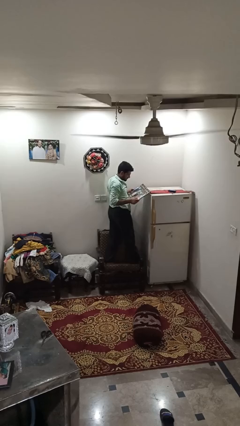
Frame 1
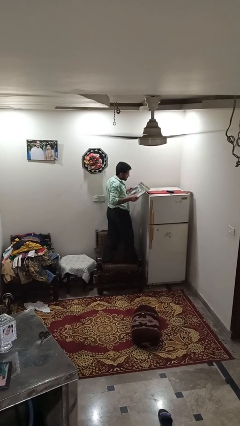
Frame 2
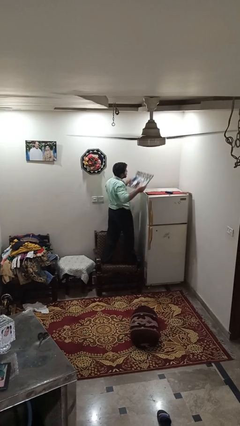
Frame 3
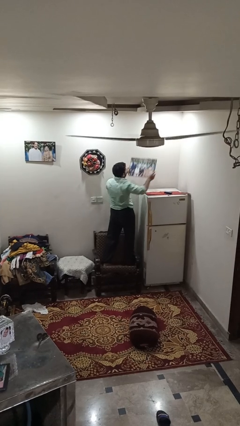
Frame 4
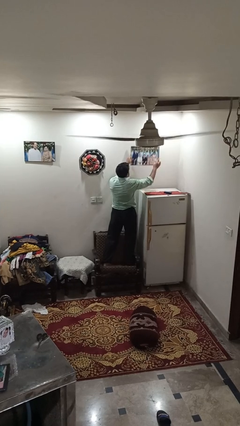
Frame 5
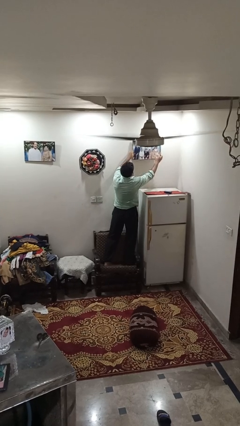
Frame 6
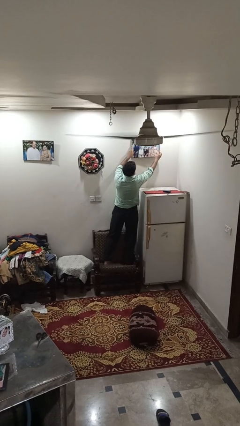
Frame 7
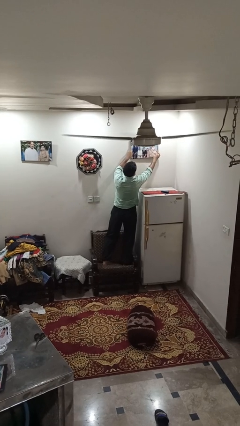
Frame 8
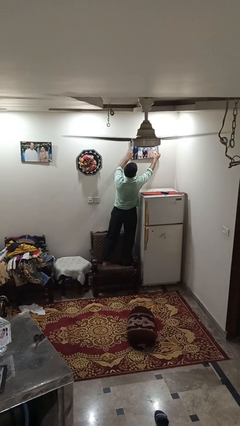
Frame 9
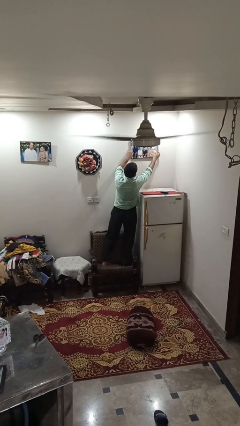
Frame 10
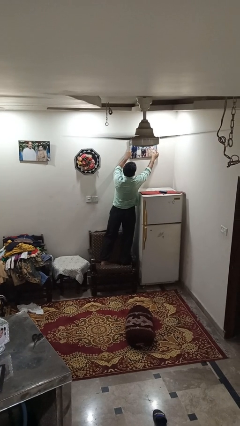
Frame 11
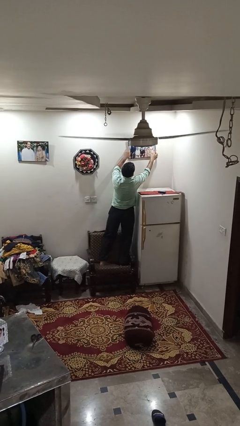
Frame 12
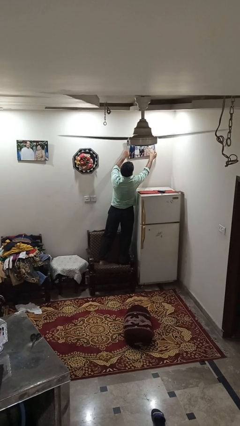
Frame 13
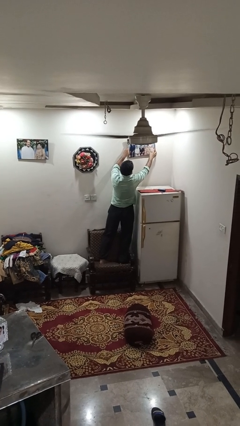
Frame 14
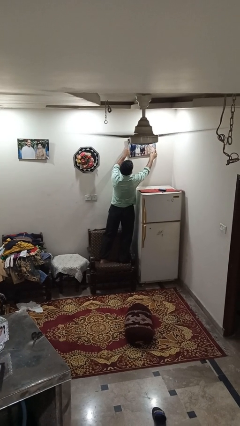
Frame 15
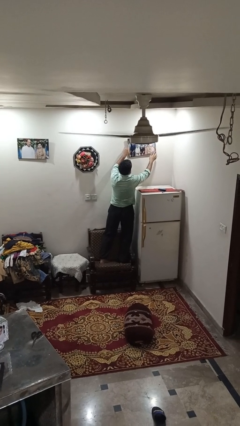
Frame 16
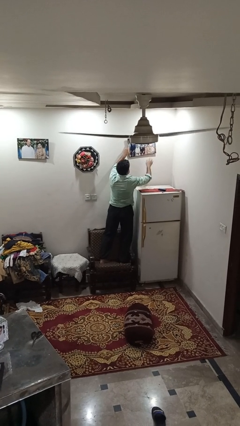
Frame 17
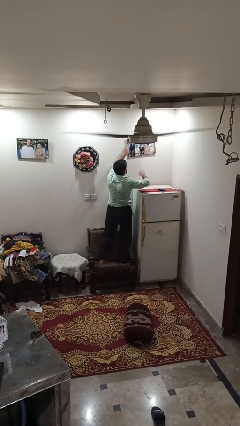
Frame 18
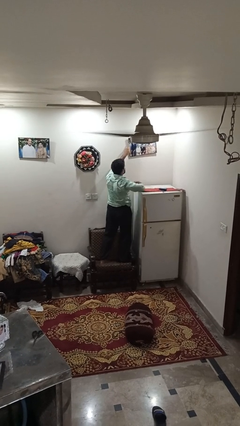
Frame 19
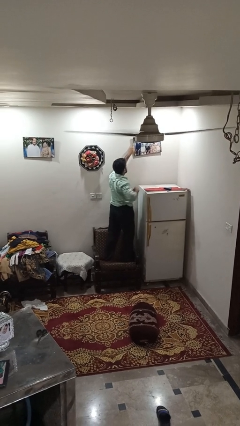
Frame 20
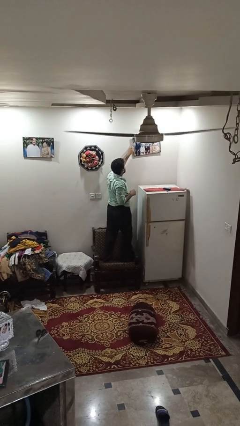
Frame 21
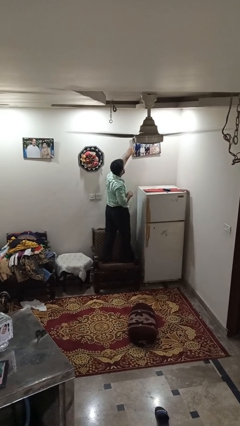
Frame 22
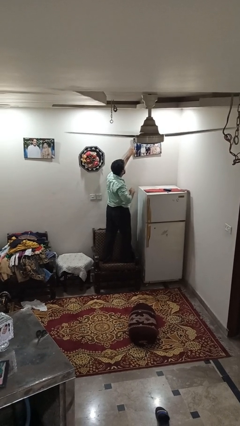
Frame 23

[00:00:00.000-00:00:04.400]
person puts up picture frame

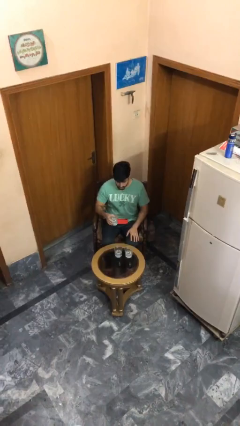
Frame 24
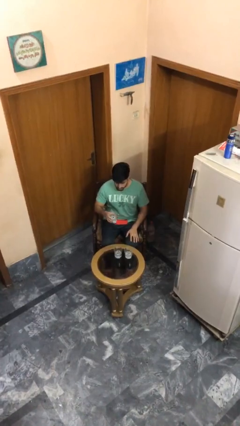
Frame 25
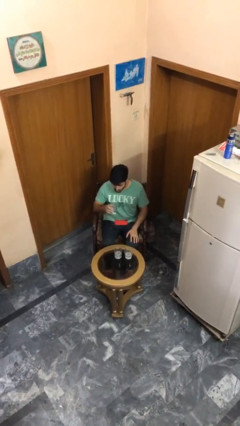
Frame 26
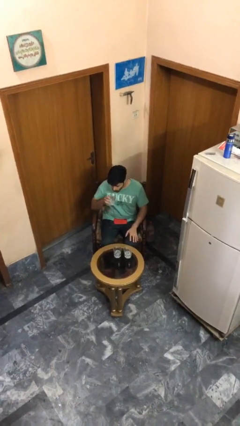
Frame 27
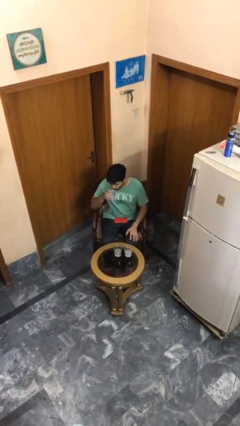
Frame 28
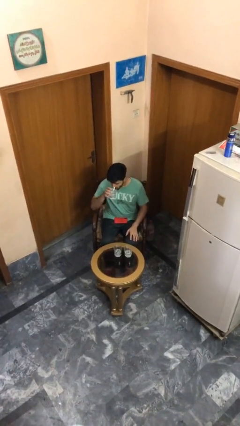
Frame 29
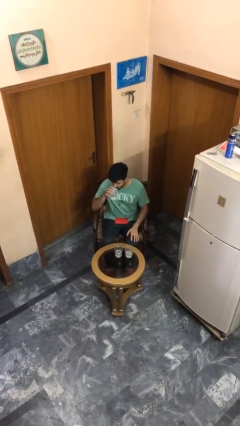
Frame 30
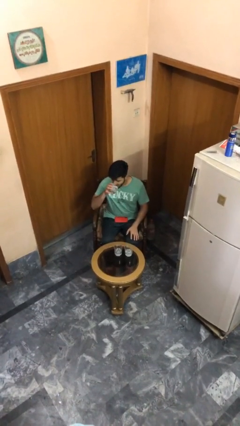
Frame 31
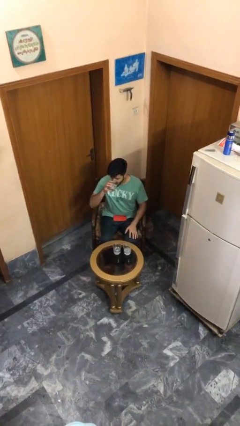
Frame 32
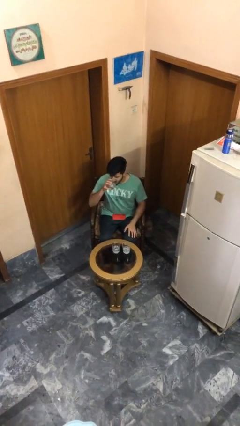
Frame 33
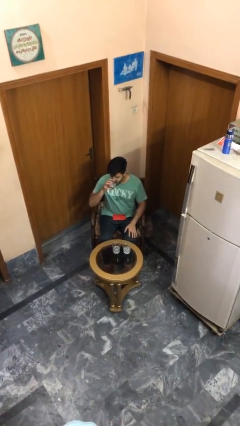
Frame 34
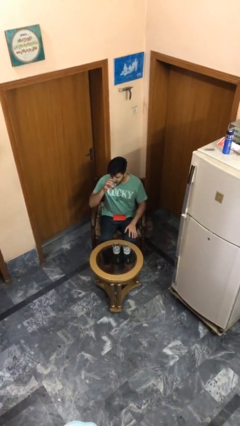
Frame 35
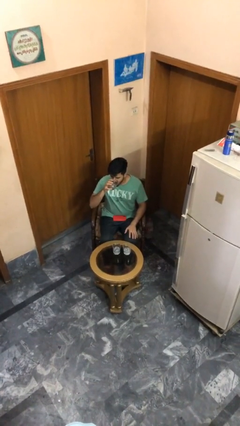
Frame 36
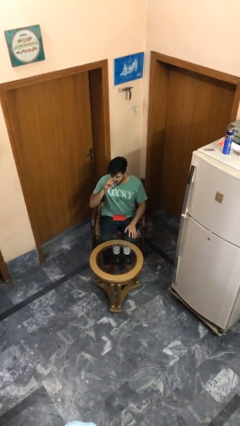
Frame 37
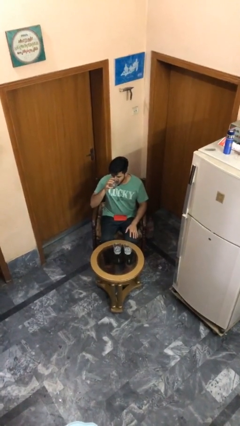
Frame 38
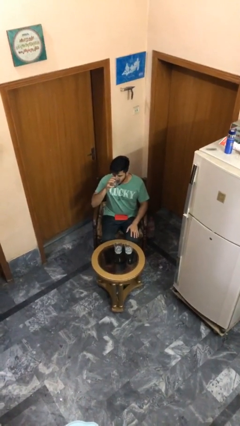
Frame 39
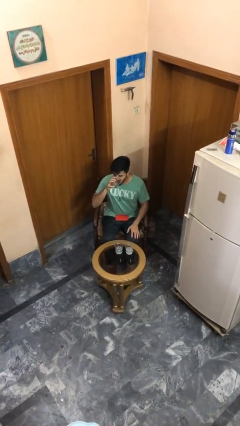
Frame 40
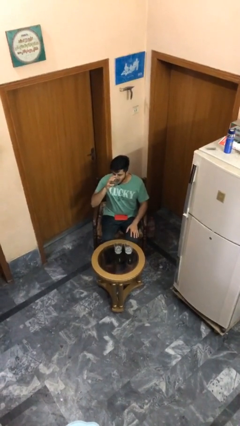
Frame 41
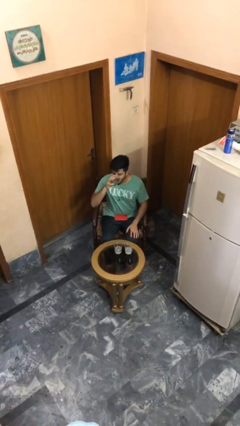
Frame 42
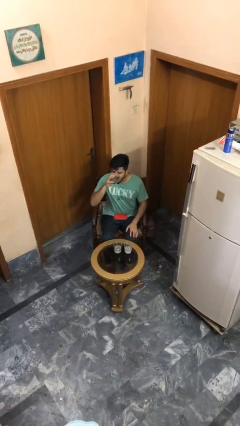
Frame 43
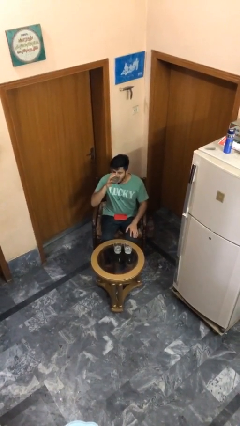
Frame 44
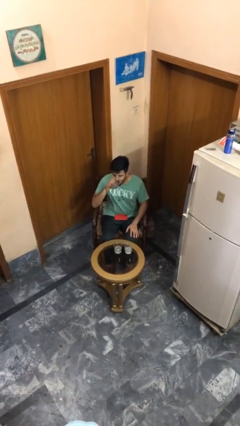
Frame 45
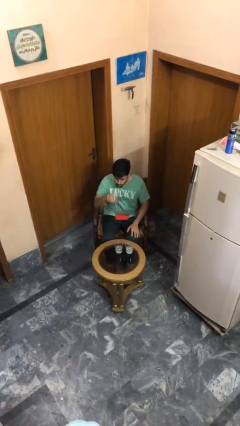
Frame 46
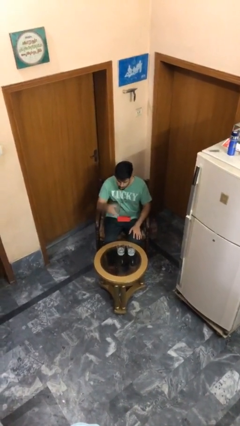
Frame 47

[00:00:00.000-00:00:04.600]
person drinks from shotglass

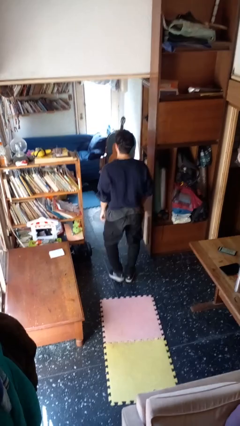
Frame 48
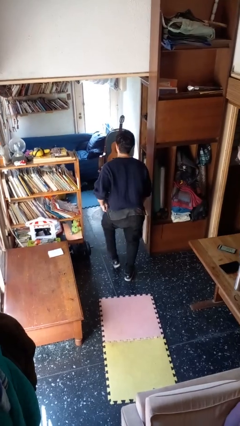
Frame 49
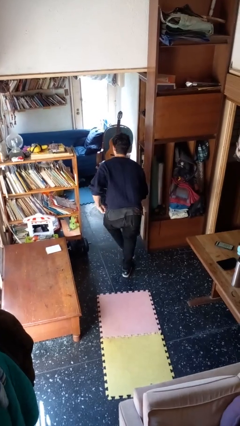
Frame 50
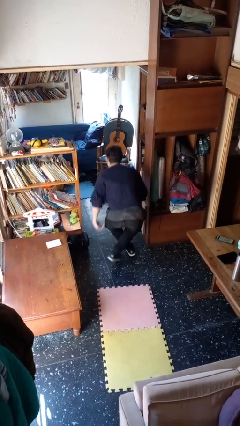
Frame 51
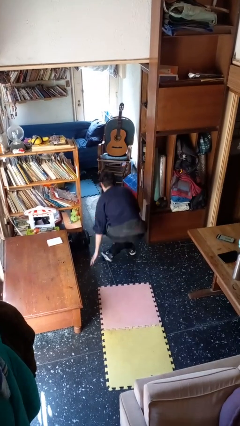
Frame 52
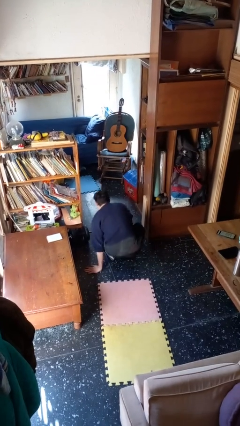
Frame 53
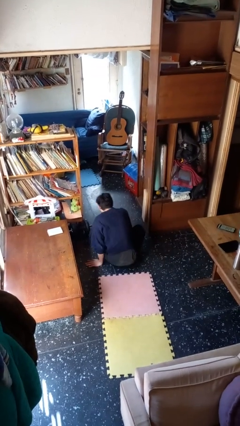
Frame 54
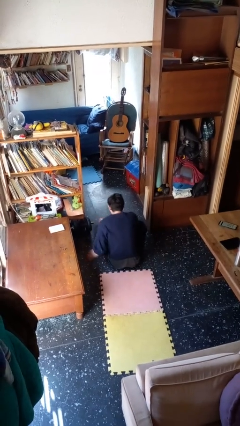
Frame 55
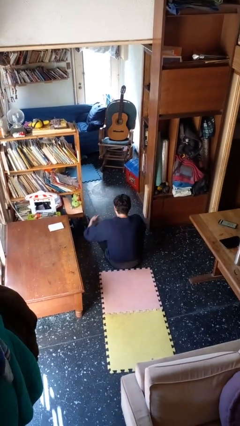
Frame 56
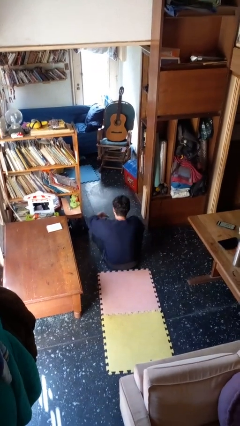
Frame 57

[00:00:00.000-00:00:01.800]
person sits crisscross

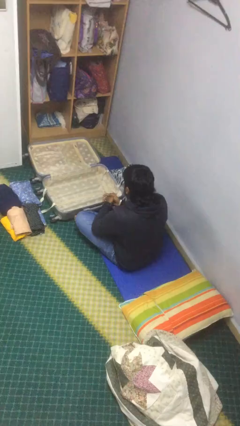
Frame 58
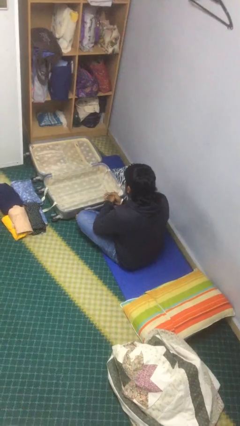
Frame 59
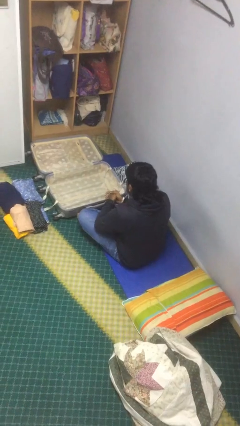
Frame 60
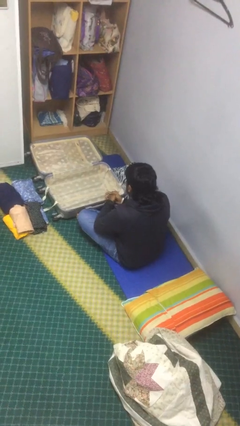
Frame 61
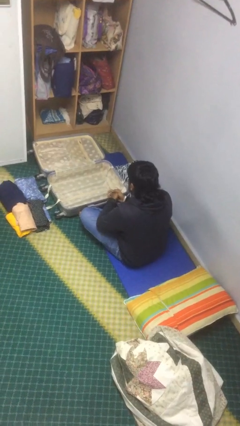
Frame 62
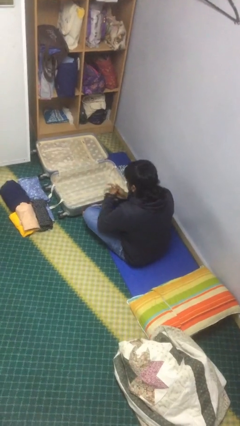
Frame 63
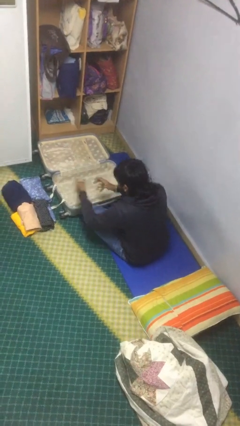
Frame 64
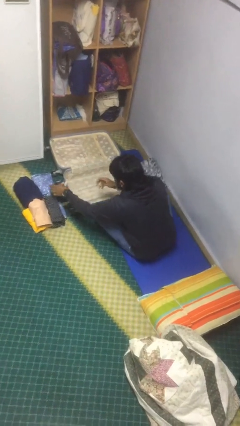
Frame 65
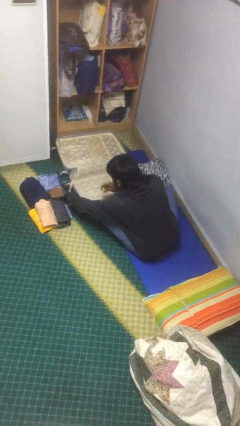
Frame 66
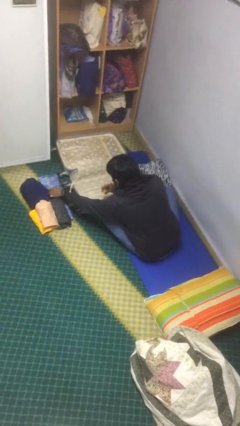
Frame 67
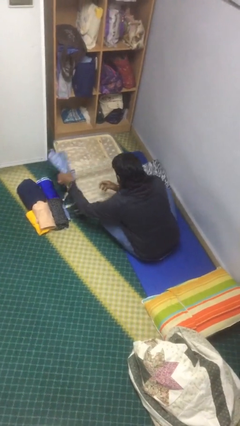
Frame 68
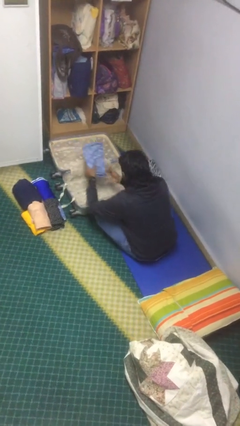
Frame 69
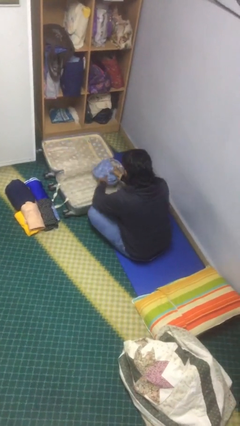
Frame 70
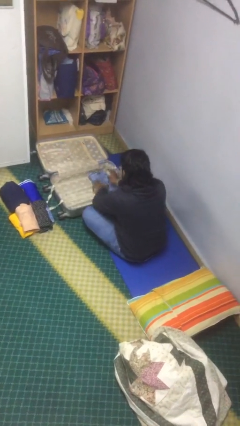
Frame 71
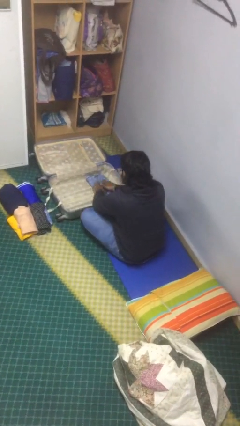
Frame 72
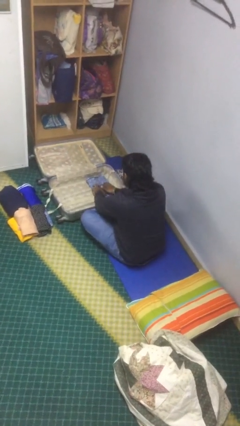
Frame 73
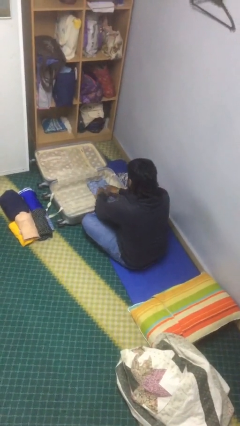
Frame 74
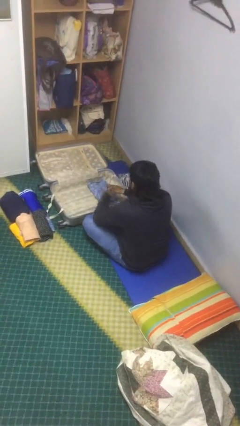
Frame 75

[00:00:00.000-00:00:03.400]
person loads clothes into suitcase

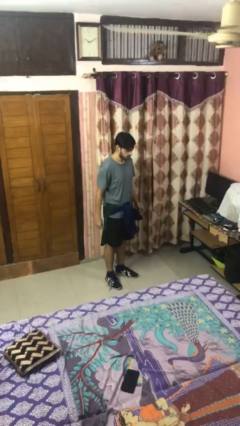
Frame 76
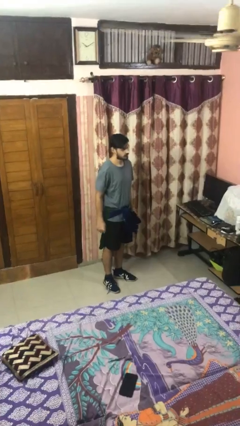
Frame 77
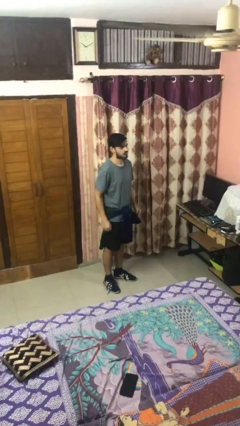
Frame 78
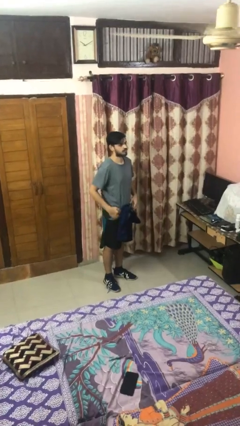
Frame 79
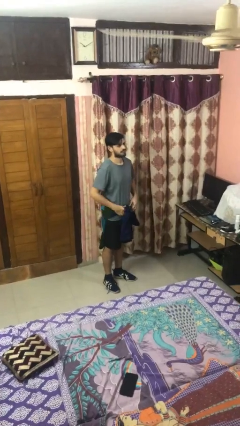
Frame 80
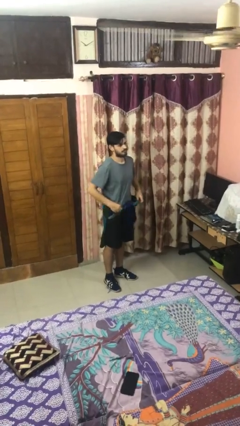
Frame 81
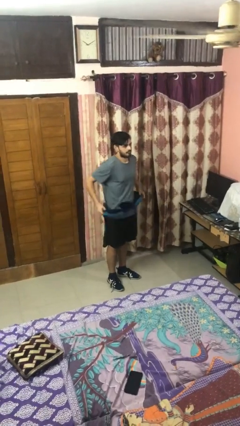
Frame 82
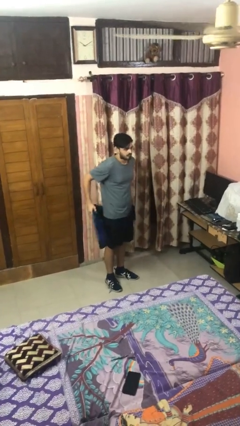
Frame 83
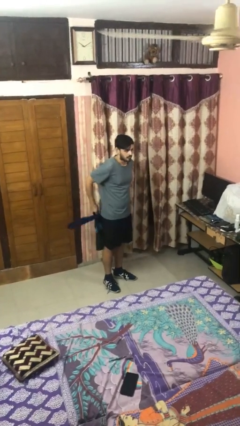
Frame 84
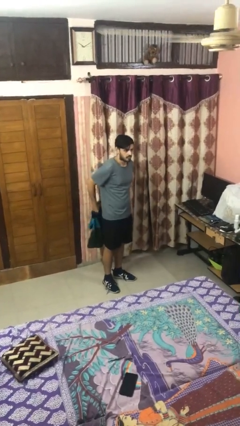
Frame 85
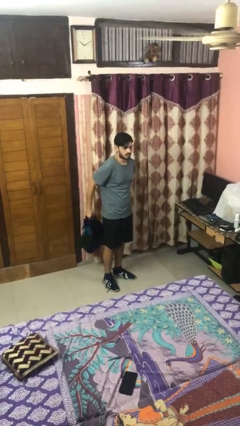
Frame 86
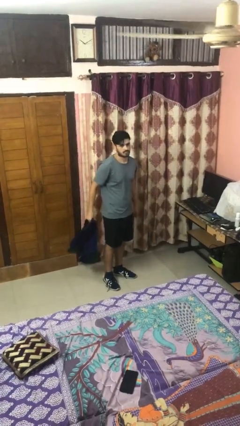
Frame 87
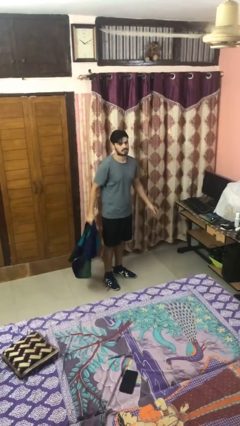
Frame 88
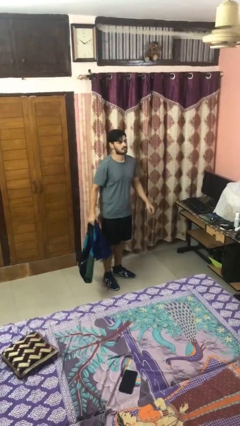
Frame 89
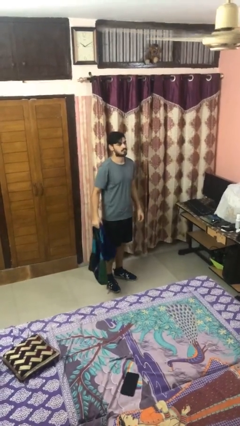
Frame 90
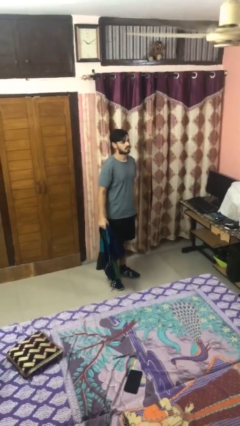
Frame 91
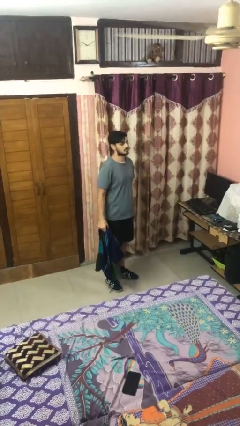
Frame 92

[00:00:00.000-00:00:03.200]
person unties jacket around waist
